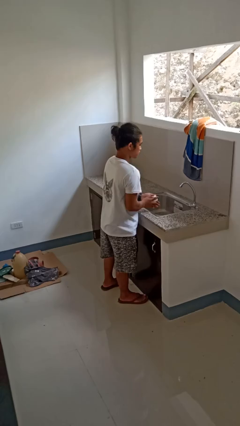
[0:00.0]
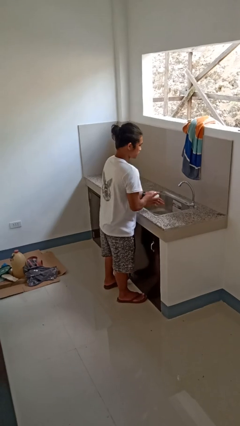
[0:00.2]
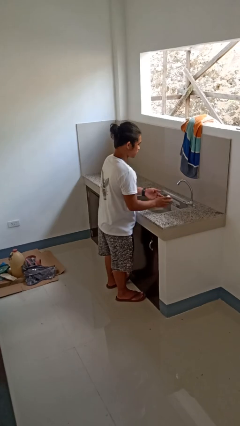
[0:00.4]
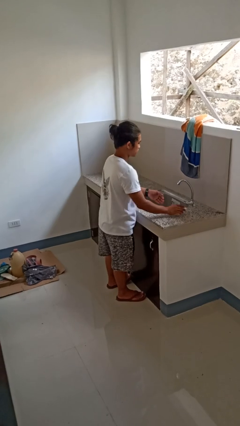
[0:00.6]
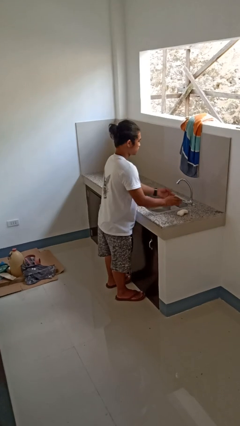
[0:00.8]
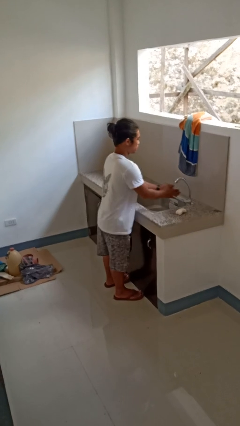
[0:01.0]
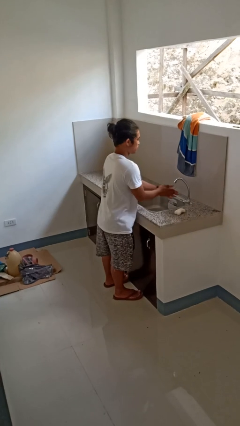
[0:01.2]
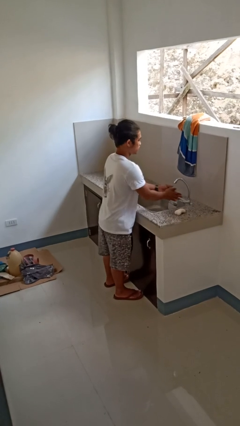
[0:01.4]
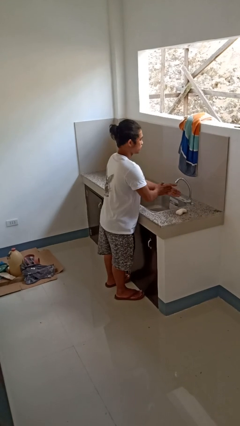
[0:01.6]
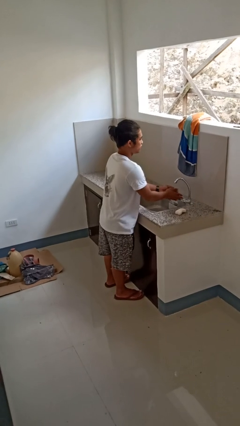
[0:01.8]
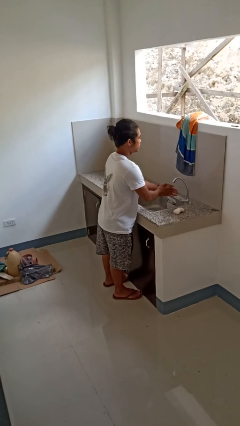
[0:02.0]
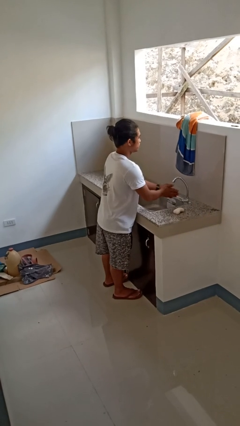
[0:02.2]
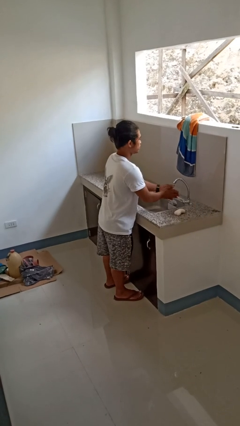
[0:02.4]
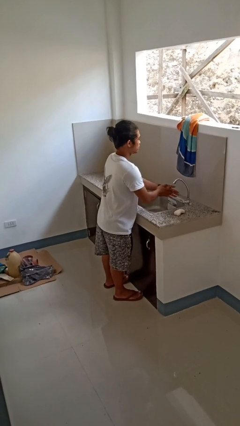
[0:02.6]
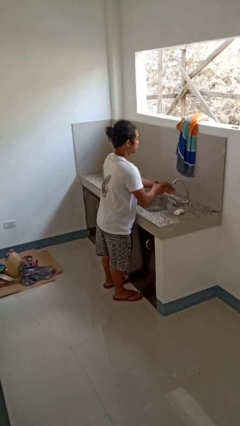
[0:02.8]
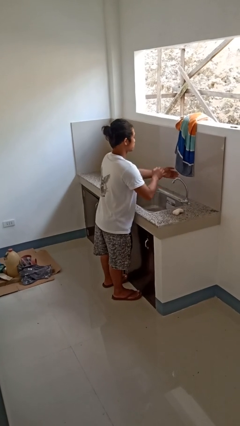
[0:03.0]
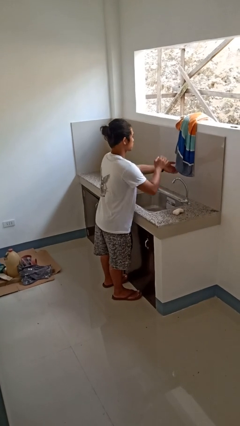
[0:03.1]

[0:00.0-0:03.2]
person washes hands

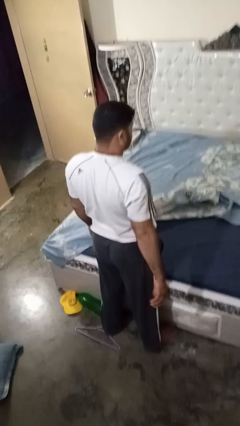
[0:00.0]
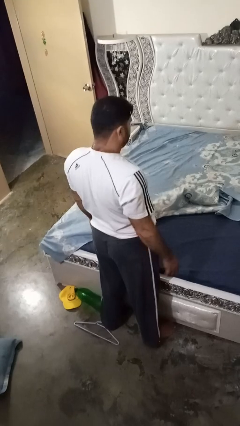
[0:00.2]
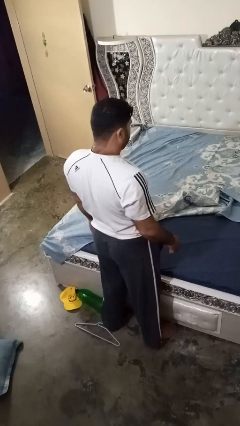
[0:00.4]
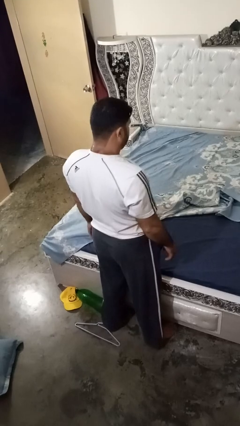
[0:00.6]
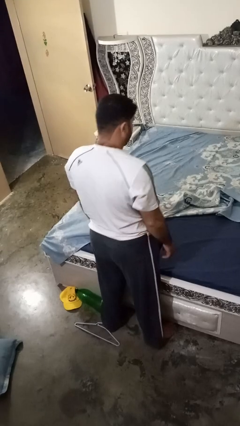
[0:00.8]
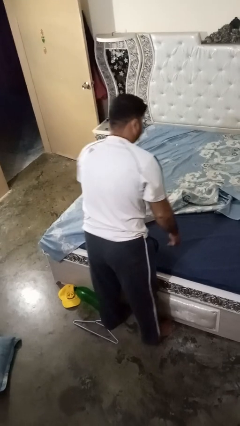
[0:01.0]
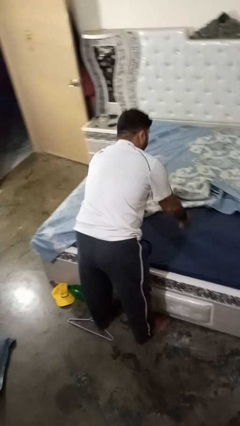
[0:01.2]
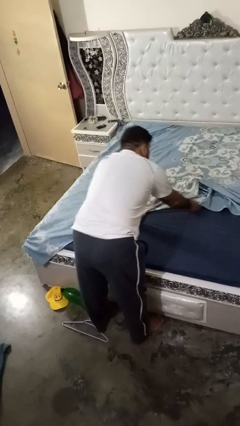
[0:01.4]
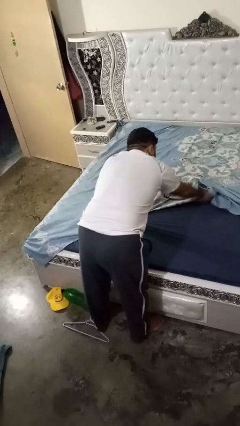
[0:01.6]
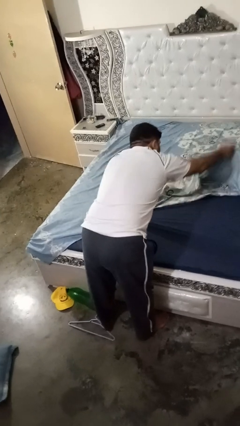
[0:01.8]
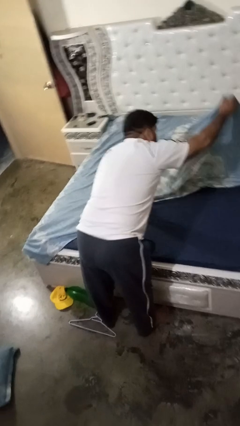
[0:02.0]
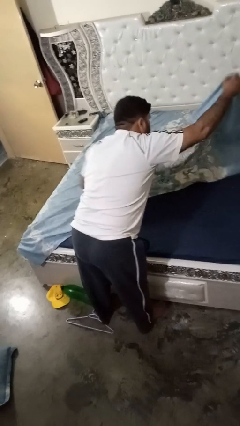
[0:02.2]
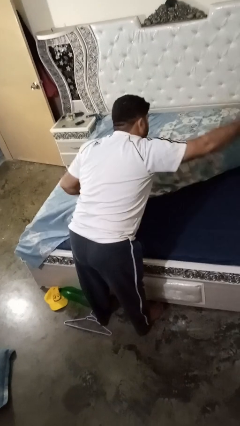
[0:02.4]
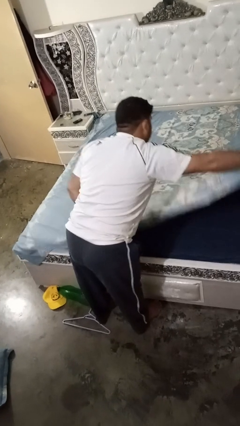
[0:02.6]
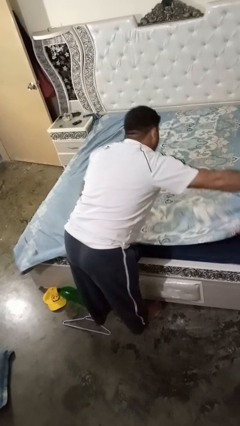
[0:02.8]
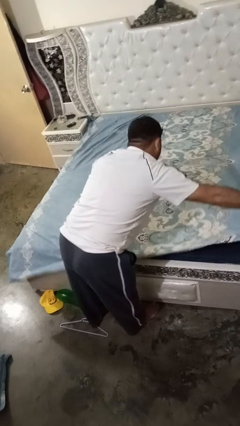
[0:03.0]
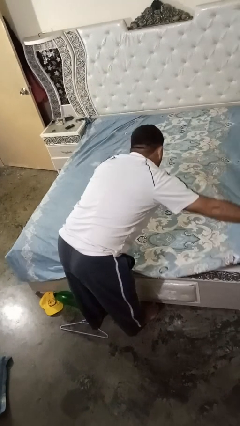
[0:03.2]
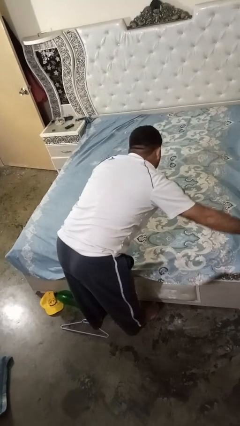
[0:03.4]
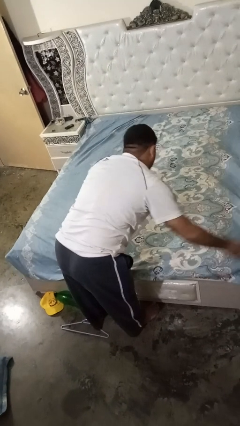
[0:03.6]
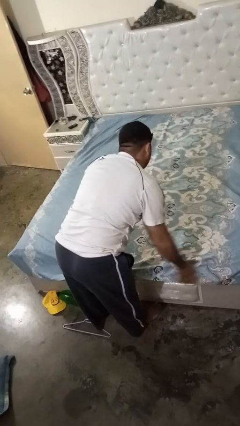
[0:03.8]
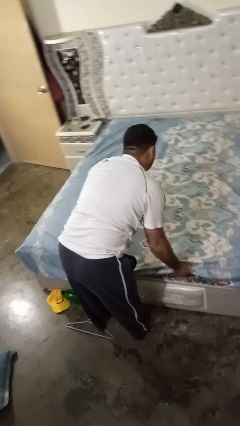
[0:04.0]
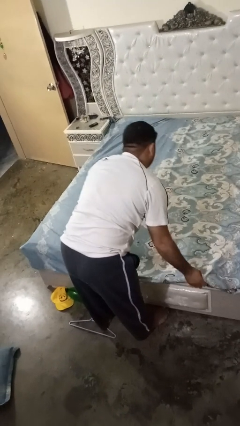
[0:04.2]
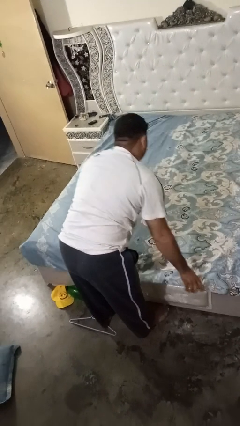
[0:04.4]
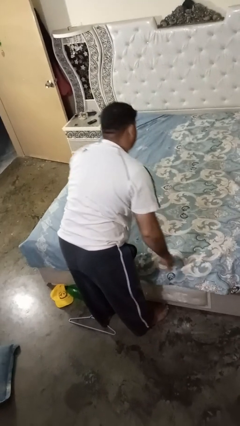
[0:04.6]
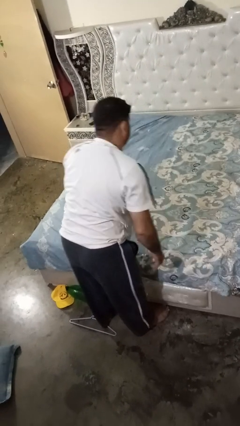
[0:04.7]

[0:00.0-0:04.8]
person makes bed

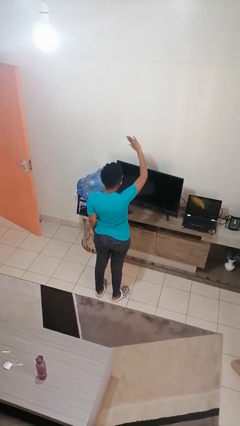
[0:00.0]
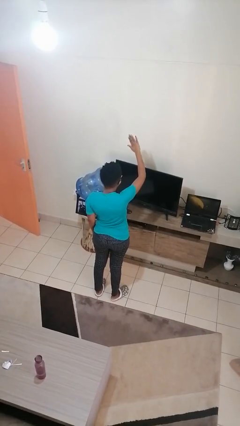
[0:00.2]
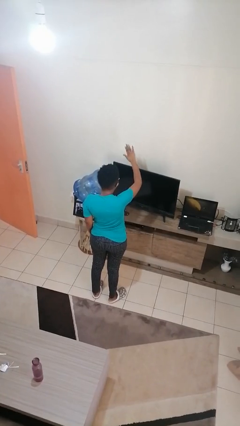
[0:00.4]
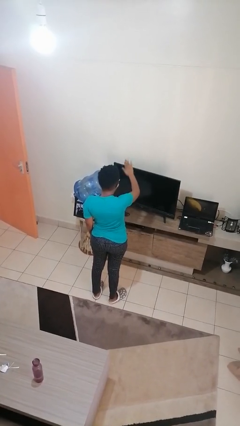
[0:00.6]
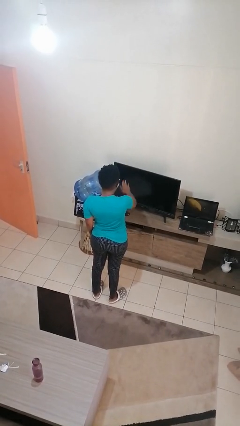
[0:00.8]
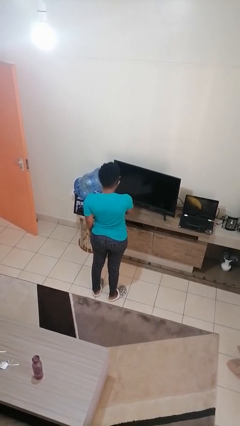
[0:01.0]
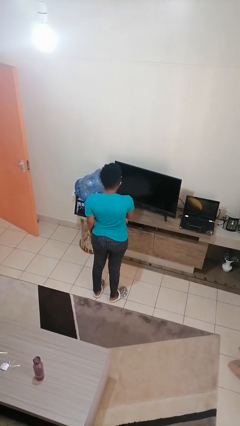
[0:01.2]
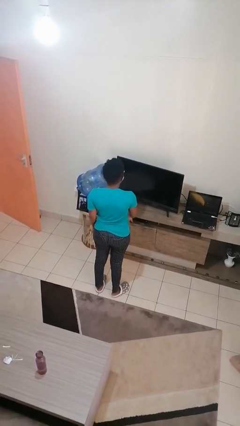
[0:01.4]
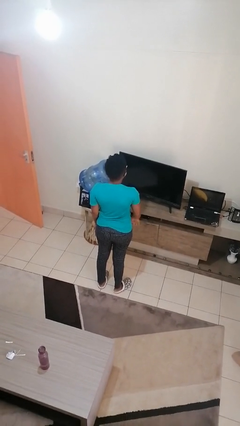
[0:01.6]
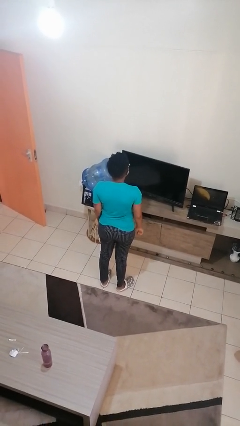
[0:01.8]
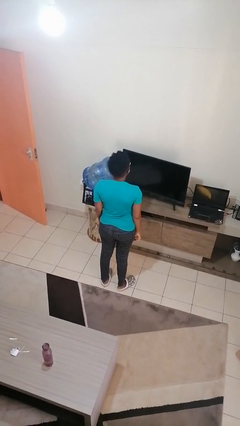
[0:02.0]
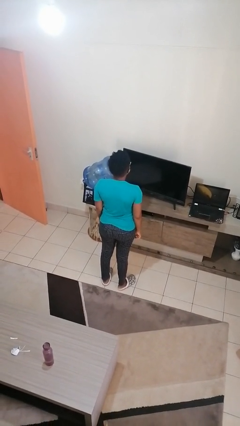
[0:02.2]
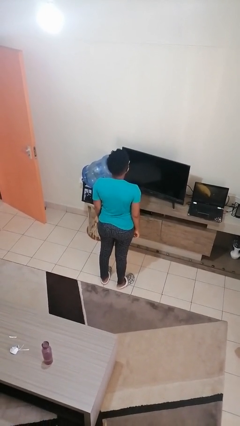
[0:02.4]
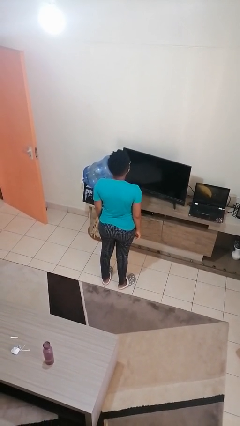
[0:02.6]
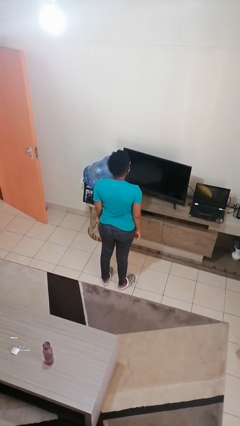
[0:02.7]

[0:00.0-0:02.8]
person gestures swipe down

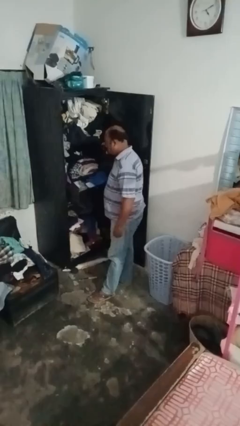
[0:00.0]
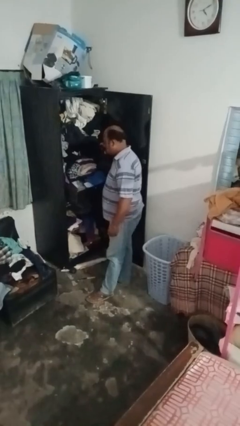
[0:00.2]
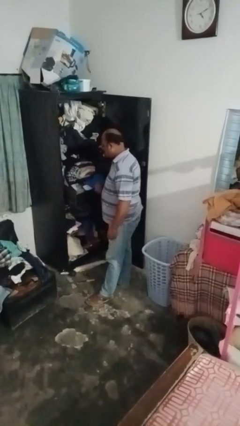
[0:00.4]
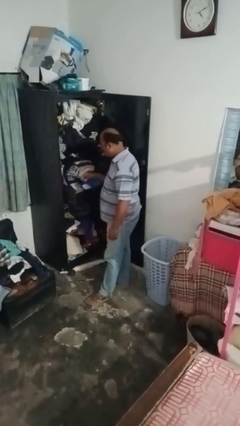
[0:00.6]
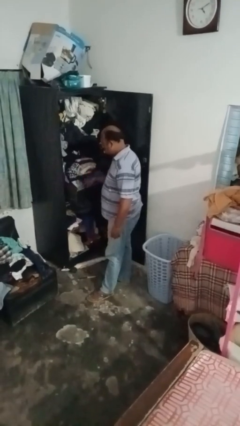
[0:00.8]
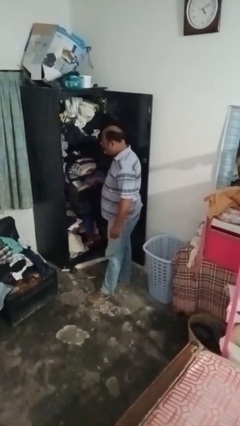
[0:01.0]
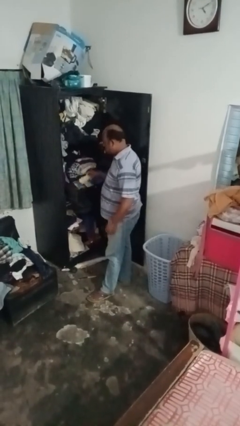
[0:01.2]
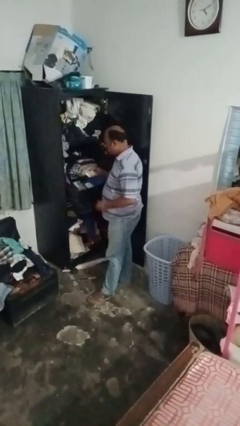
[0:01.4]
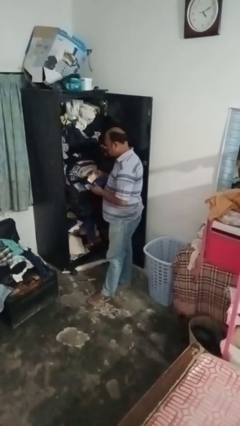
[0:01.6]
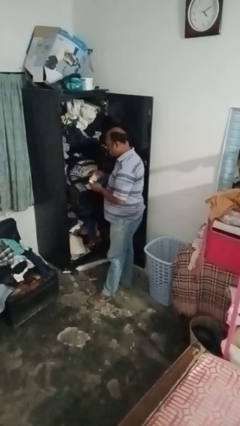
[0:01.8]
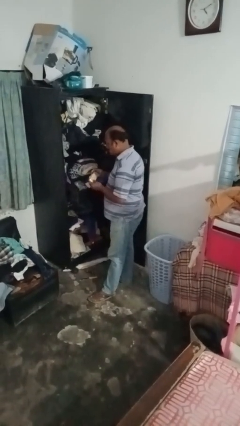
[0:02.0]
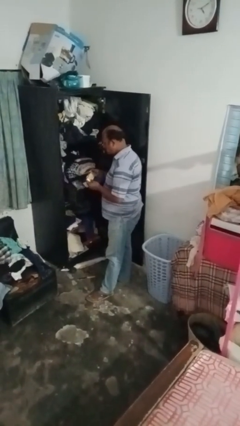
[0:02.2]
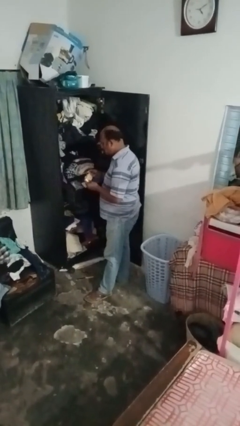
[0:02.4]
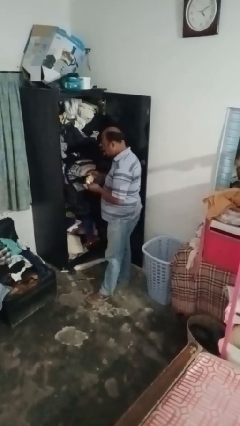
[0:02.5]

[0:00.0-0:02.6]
person puts clothes into dresser

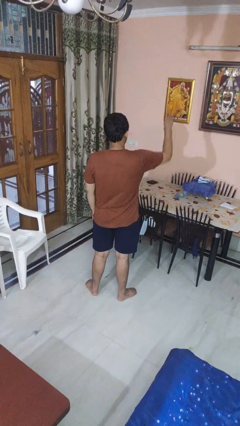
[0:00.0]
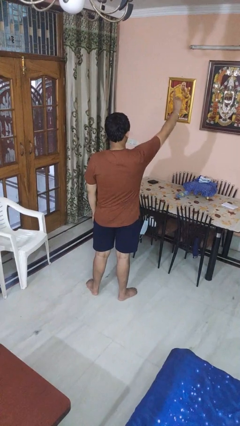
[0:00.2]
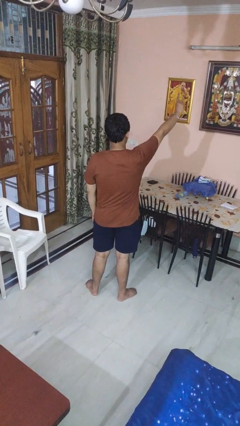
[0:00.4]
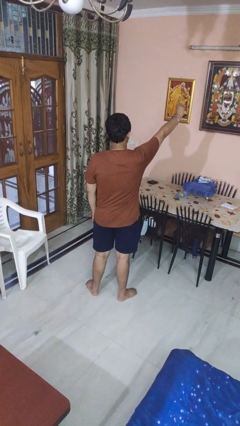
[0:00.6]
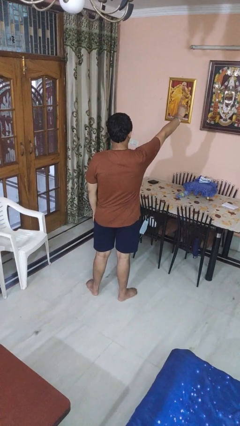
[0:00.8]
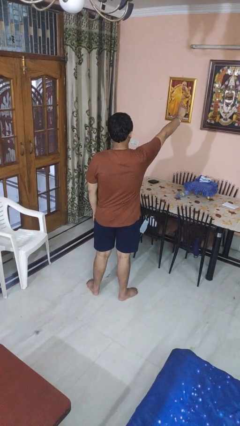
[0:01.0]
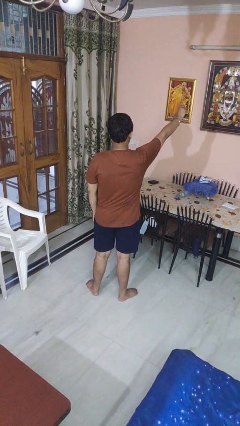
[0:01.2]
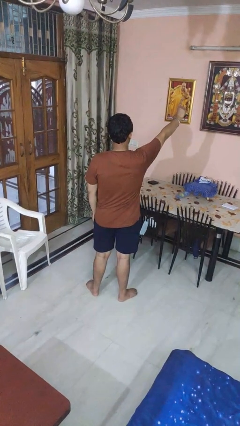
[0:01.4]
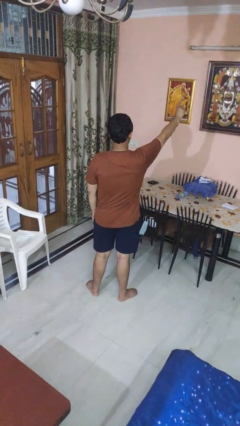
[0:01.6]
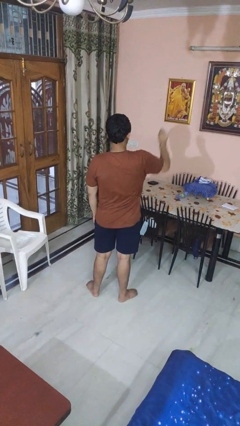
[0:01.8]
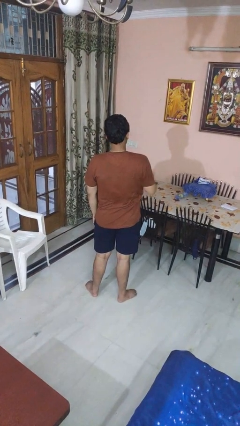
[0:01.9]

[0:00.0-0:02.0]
person gestures number one

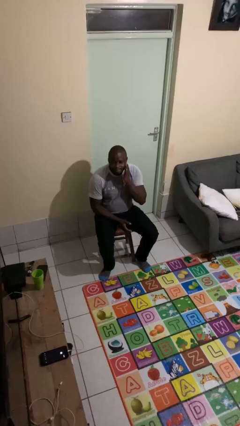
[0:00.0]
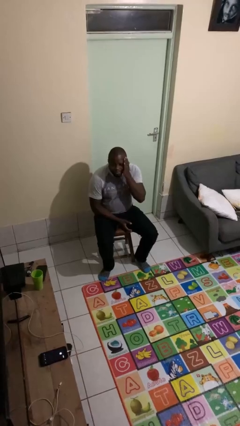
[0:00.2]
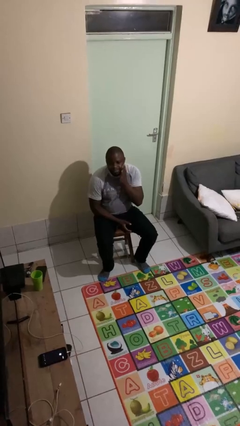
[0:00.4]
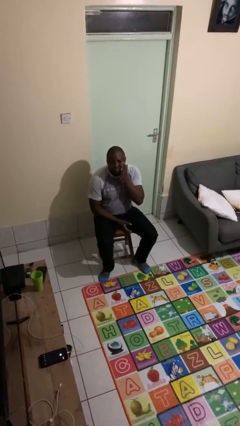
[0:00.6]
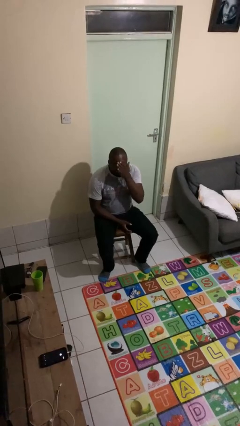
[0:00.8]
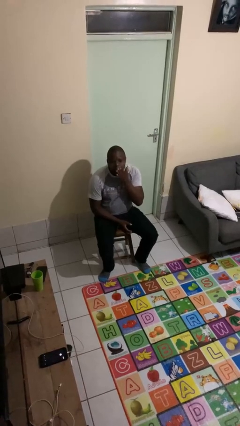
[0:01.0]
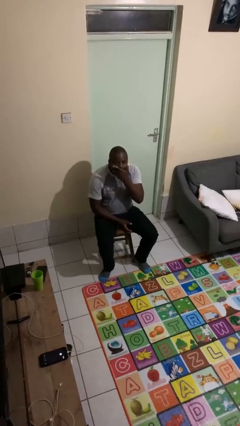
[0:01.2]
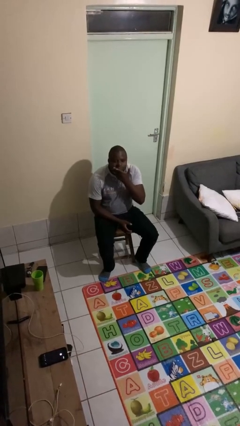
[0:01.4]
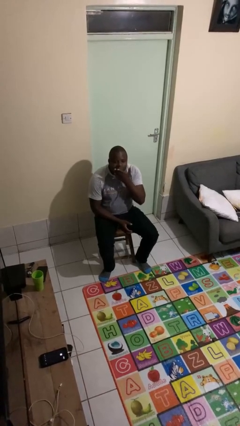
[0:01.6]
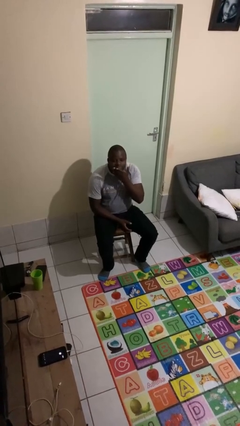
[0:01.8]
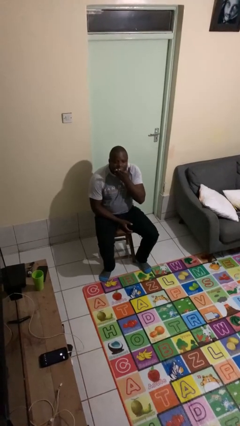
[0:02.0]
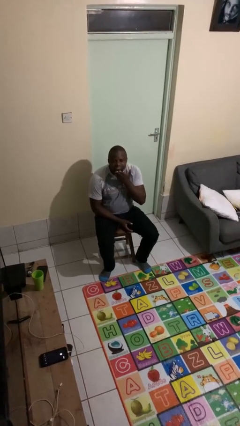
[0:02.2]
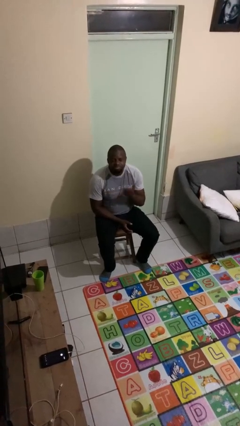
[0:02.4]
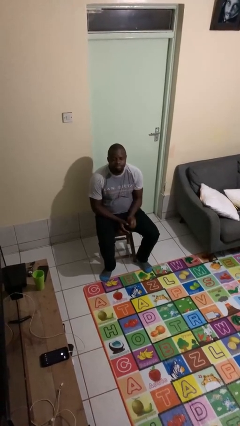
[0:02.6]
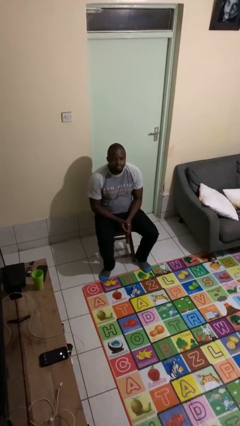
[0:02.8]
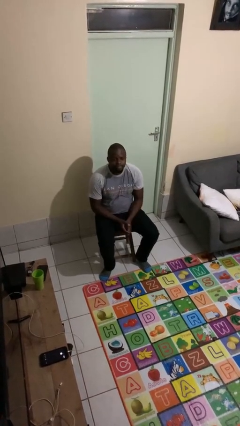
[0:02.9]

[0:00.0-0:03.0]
person scratches face
